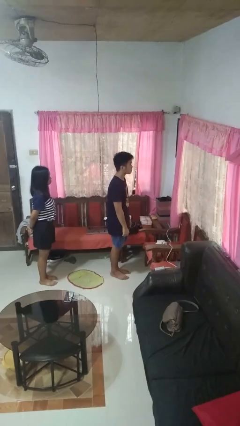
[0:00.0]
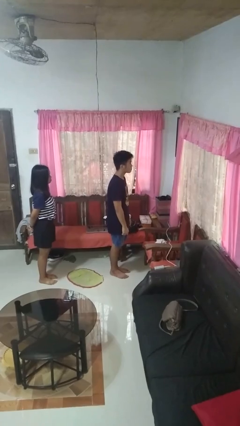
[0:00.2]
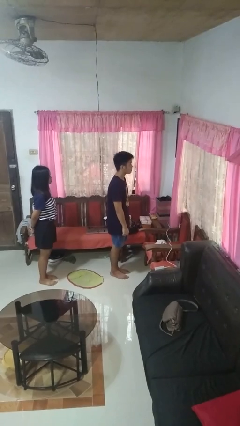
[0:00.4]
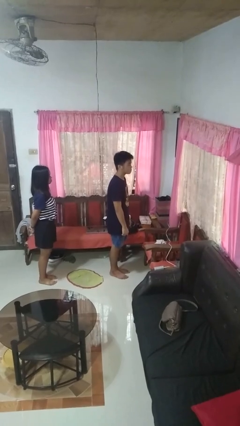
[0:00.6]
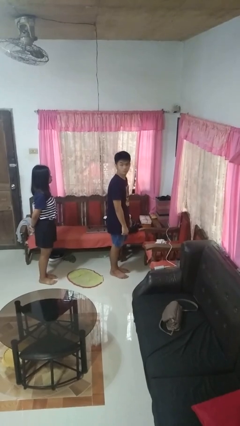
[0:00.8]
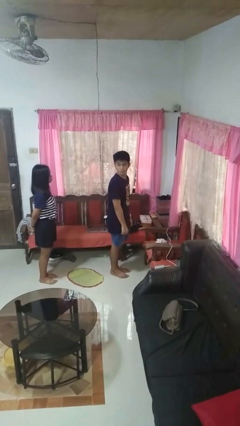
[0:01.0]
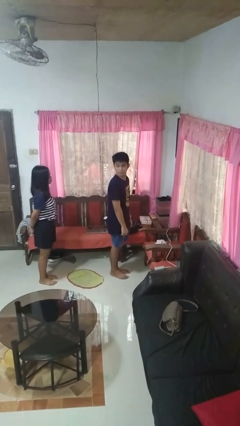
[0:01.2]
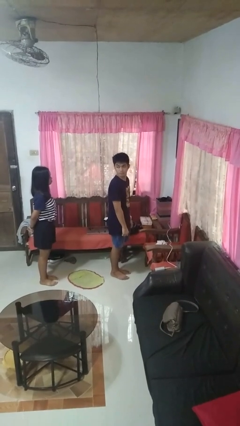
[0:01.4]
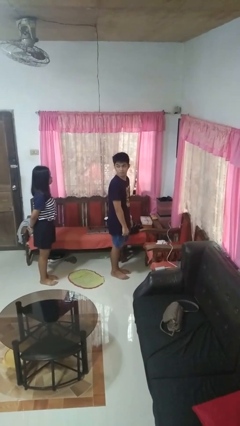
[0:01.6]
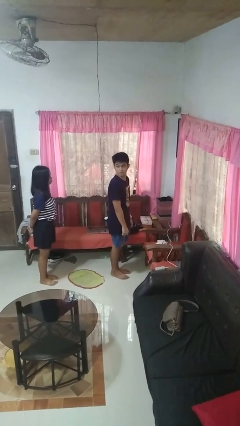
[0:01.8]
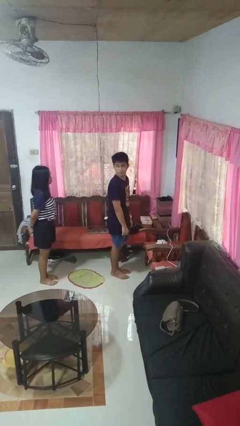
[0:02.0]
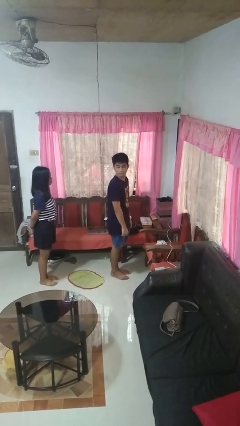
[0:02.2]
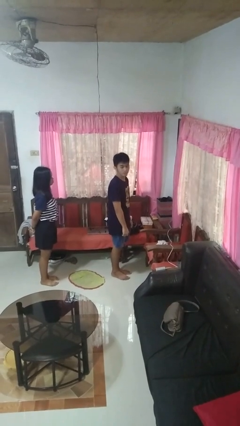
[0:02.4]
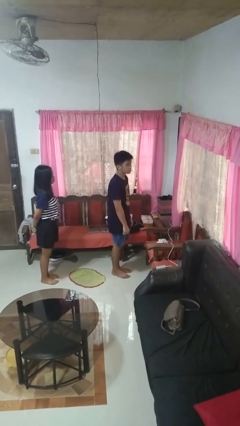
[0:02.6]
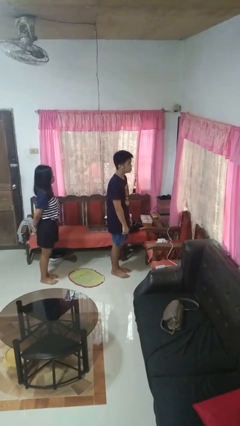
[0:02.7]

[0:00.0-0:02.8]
person looks over shoulder

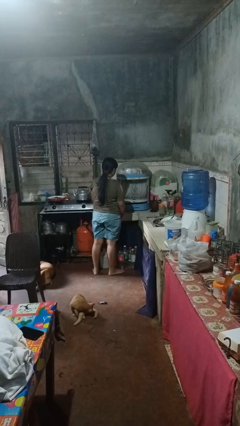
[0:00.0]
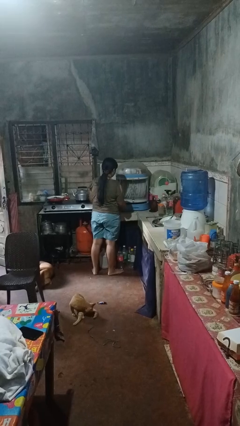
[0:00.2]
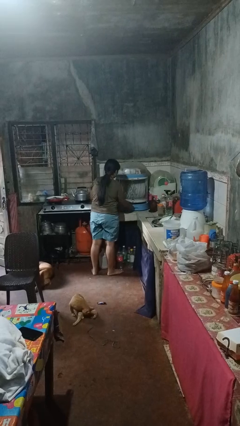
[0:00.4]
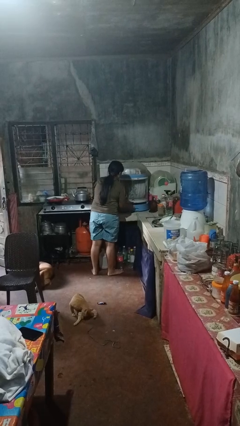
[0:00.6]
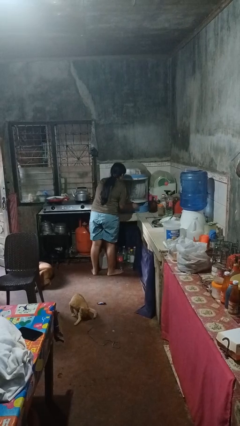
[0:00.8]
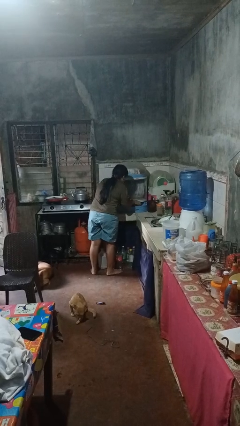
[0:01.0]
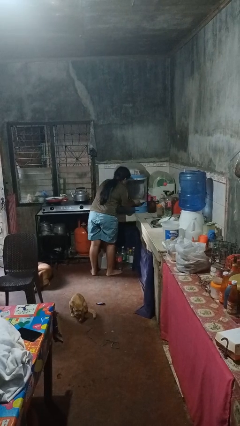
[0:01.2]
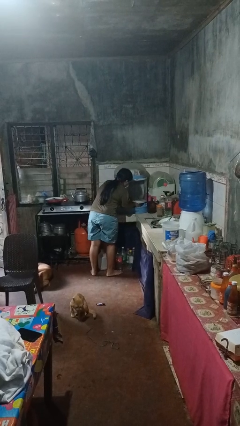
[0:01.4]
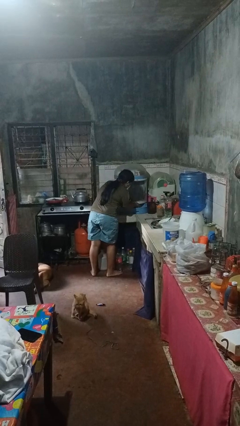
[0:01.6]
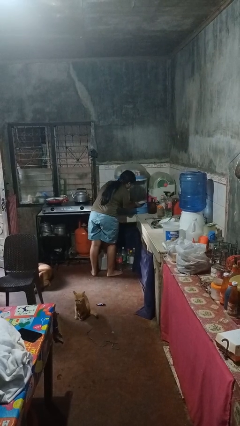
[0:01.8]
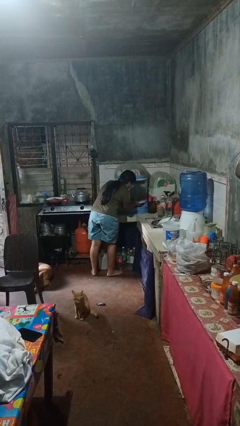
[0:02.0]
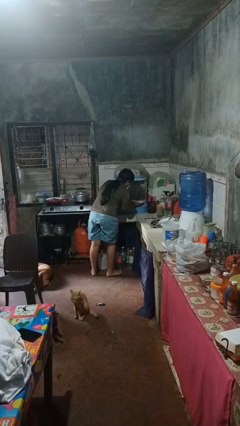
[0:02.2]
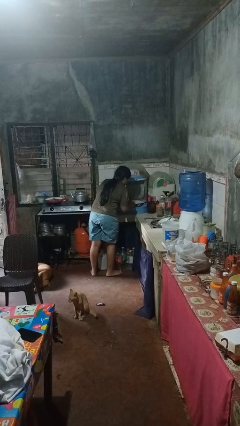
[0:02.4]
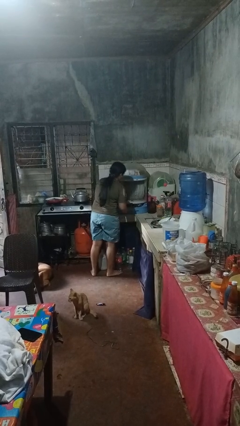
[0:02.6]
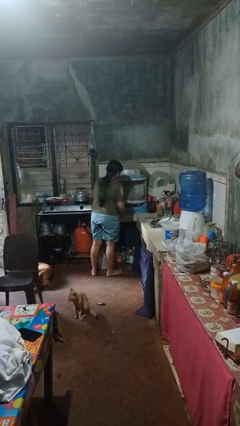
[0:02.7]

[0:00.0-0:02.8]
person searches in kitchen drawer

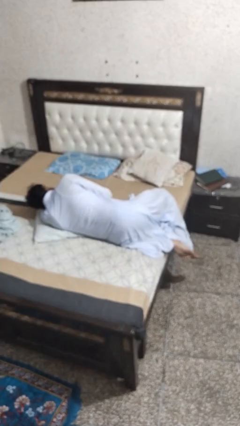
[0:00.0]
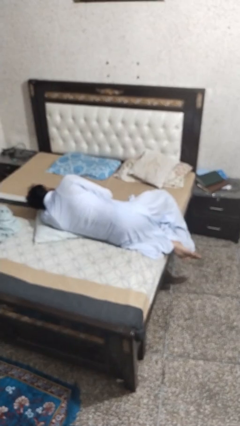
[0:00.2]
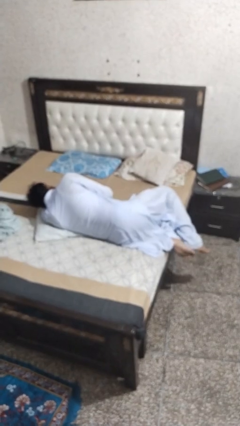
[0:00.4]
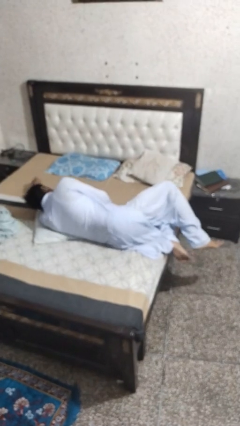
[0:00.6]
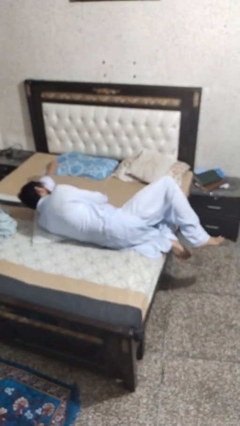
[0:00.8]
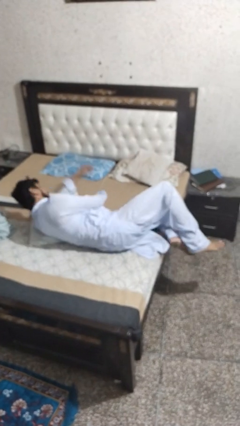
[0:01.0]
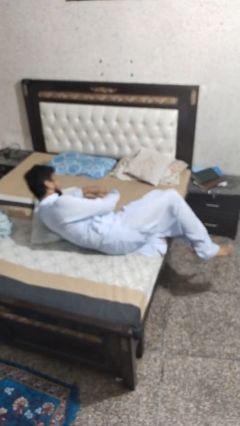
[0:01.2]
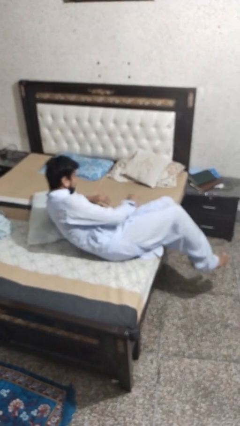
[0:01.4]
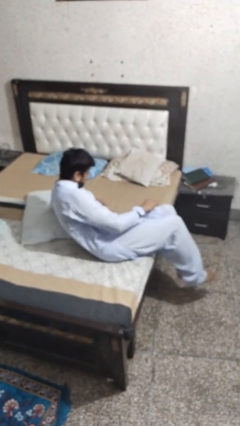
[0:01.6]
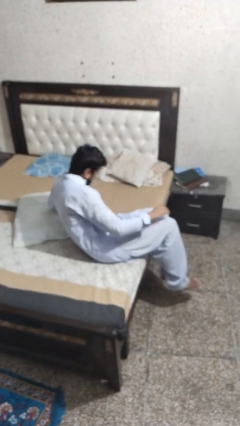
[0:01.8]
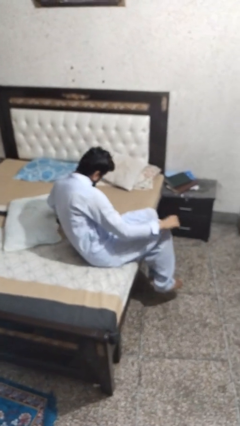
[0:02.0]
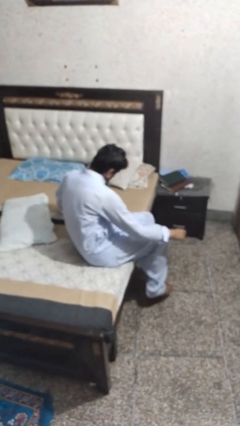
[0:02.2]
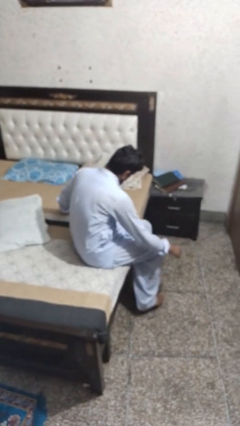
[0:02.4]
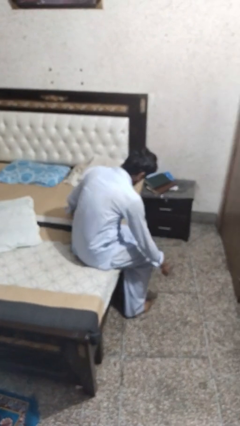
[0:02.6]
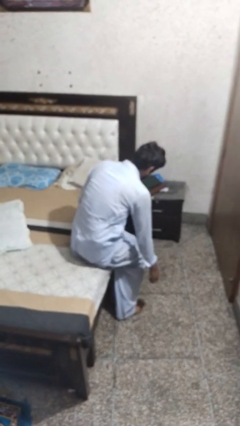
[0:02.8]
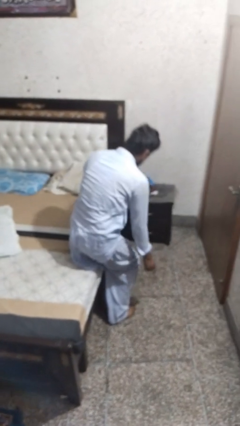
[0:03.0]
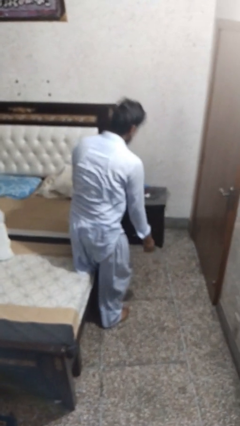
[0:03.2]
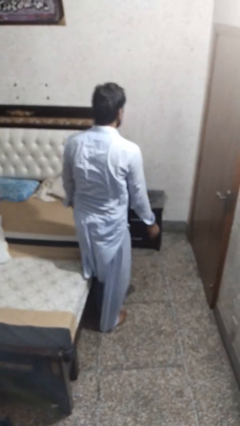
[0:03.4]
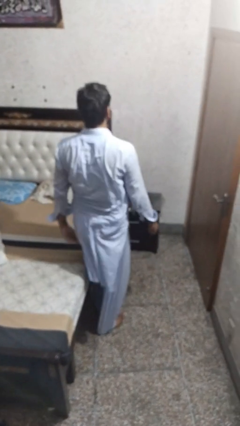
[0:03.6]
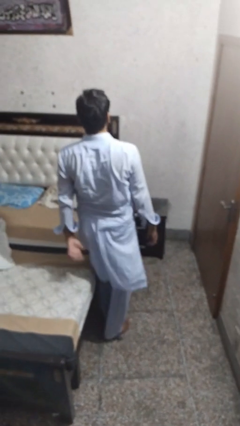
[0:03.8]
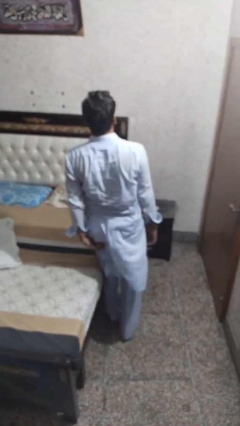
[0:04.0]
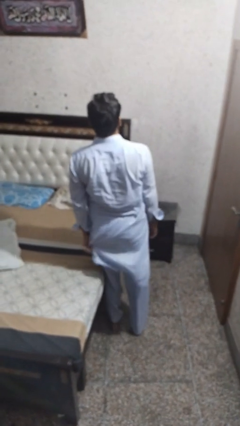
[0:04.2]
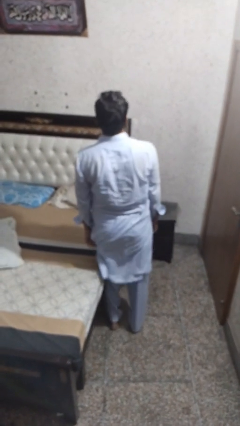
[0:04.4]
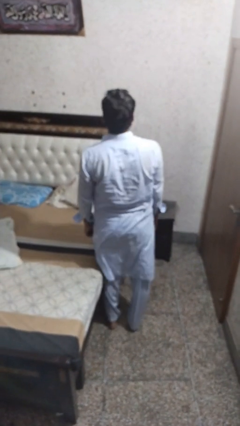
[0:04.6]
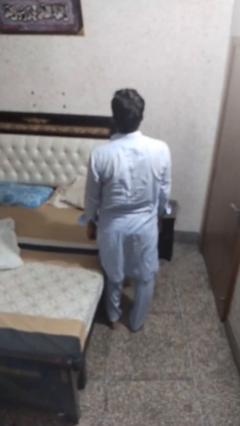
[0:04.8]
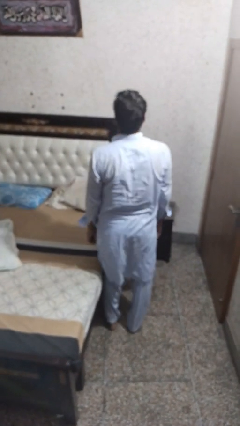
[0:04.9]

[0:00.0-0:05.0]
person stands up

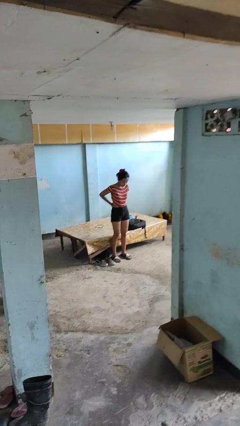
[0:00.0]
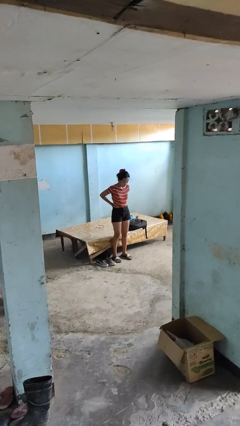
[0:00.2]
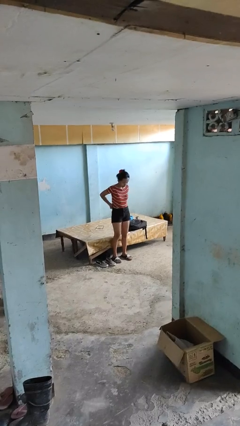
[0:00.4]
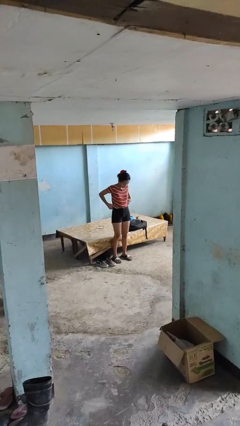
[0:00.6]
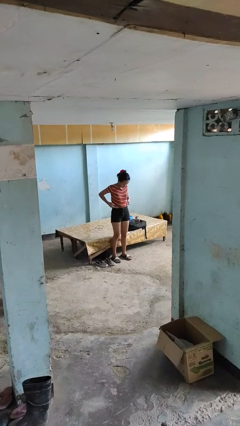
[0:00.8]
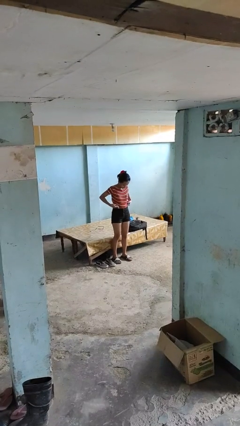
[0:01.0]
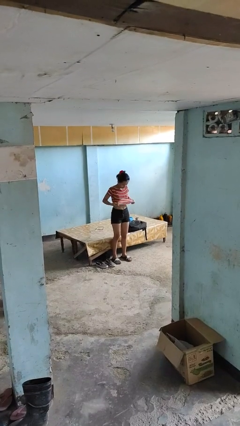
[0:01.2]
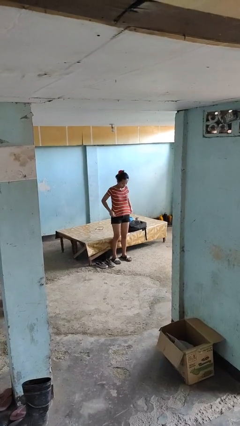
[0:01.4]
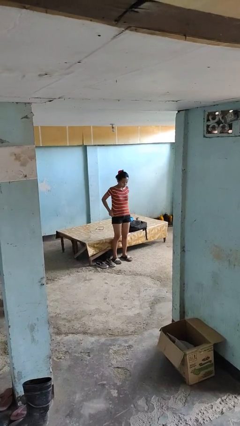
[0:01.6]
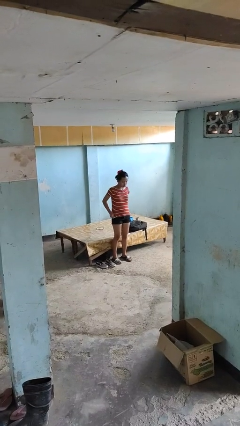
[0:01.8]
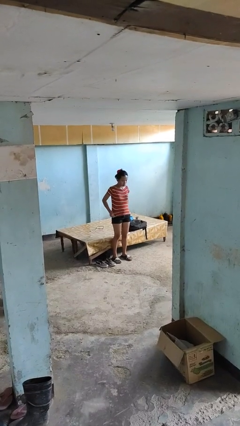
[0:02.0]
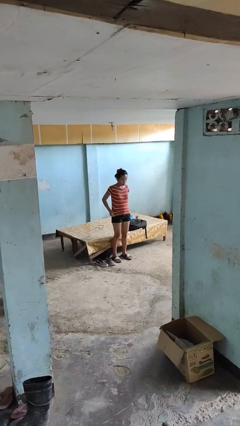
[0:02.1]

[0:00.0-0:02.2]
person untucks shirt

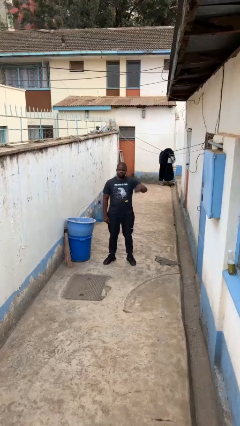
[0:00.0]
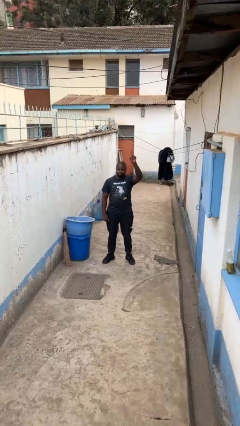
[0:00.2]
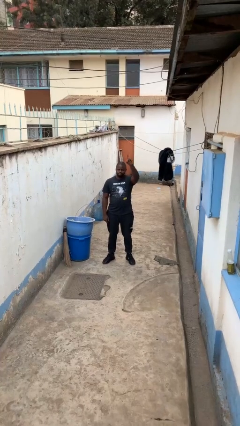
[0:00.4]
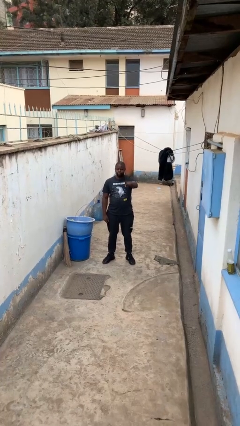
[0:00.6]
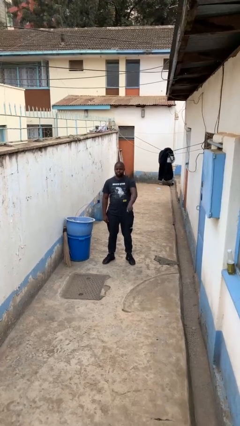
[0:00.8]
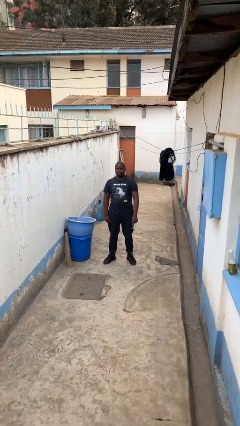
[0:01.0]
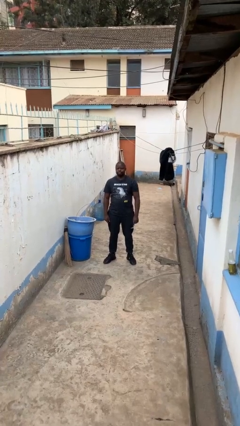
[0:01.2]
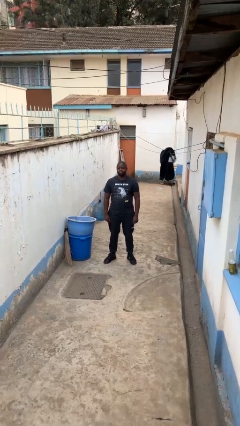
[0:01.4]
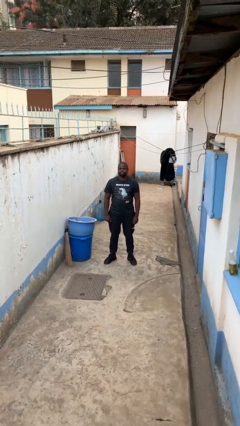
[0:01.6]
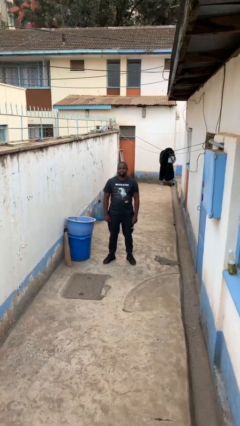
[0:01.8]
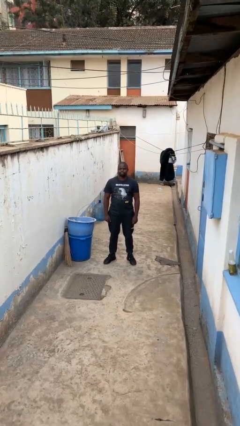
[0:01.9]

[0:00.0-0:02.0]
person gestures swipe down

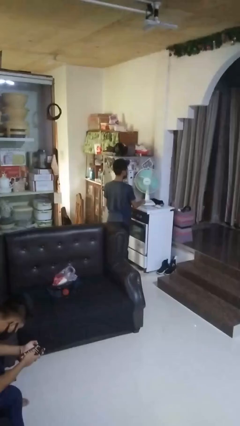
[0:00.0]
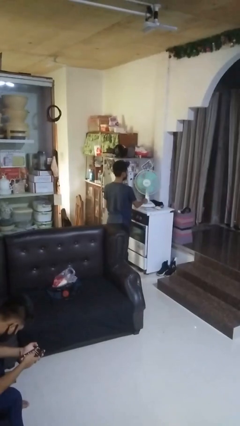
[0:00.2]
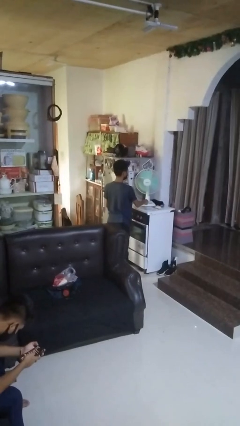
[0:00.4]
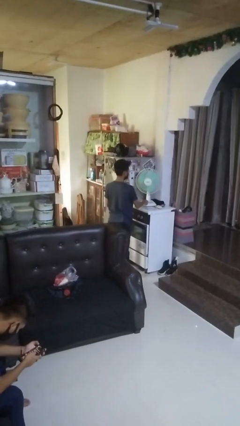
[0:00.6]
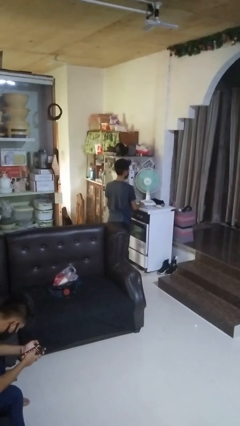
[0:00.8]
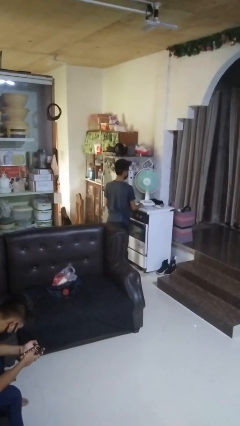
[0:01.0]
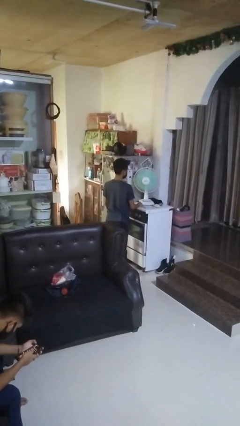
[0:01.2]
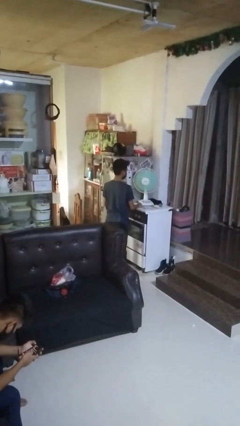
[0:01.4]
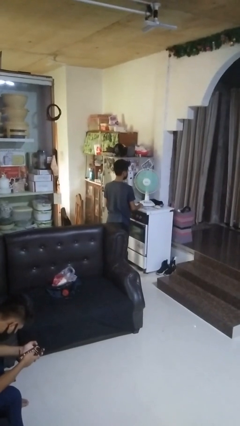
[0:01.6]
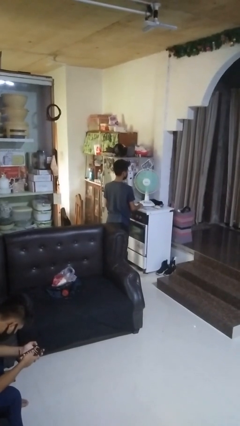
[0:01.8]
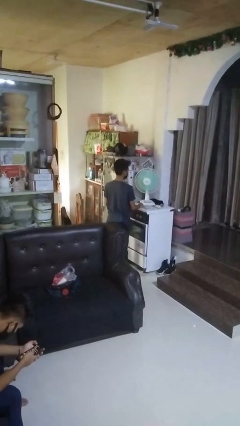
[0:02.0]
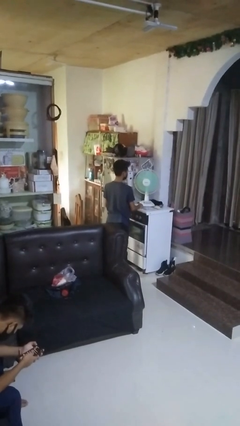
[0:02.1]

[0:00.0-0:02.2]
person turns on fan

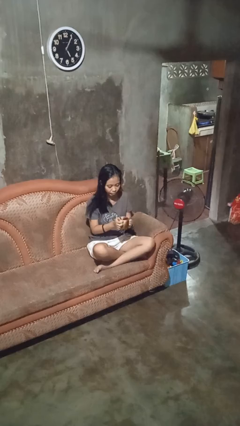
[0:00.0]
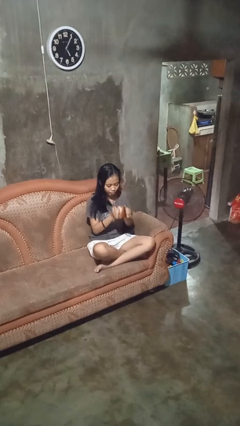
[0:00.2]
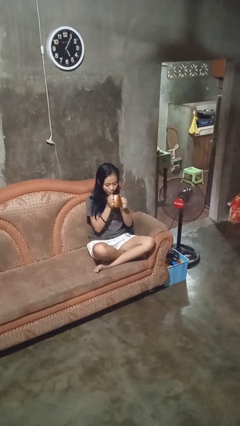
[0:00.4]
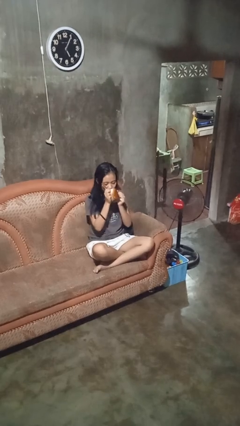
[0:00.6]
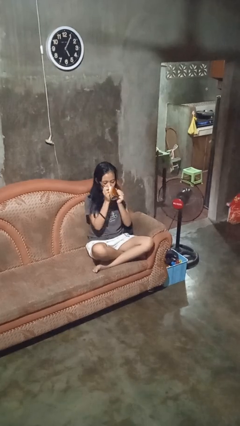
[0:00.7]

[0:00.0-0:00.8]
person drinks from mug
